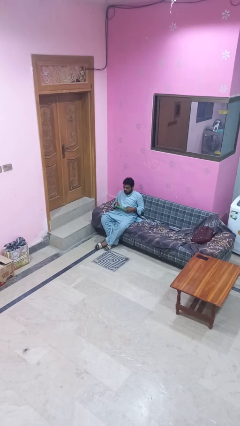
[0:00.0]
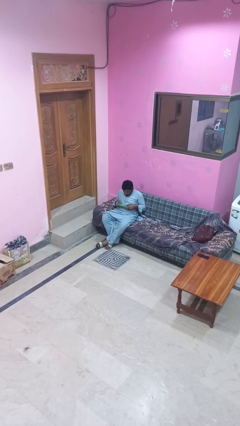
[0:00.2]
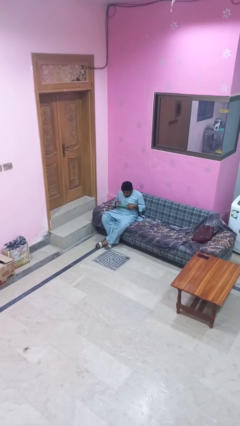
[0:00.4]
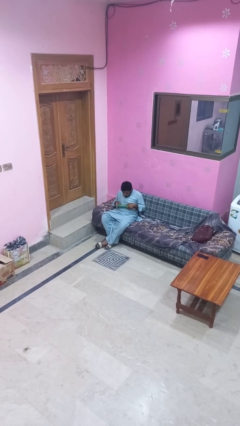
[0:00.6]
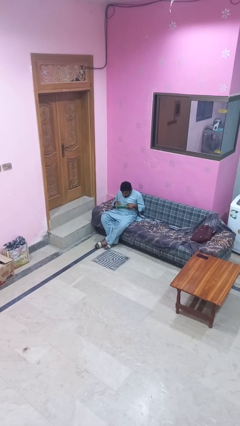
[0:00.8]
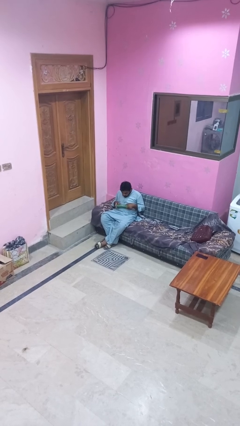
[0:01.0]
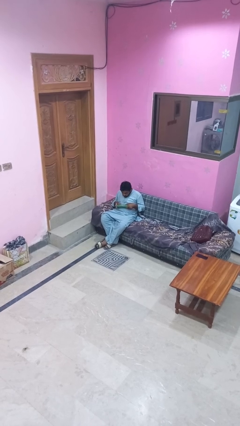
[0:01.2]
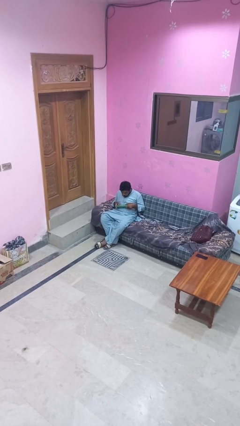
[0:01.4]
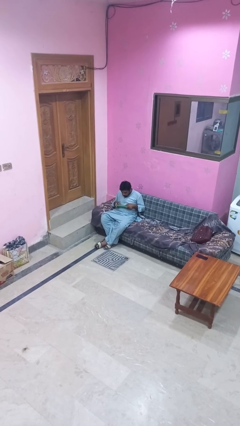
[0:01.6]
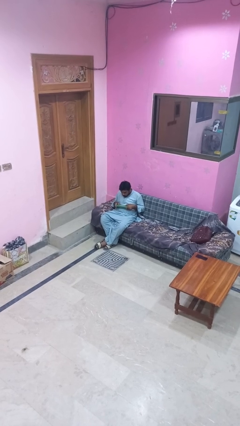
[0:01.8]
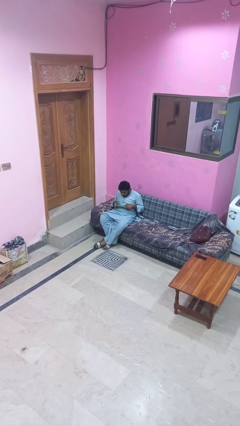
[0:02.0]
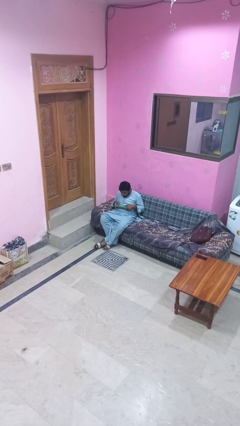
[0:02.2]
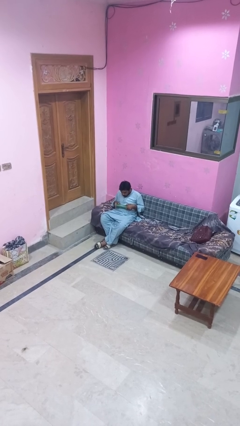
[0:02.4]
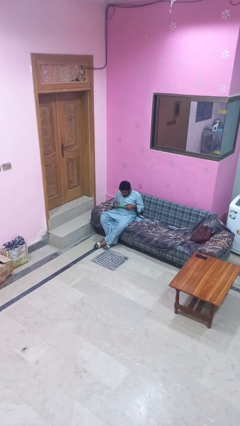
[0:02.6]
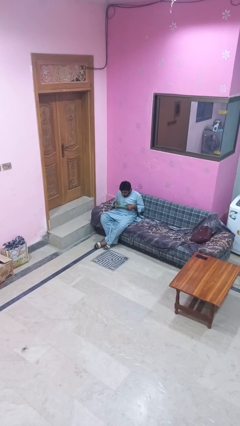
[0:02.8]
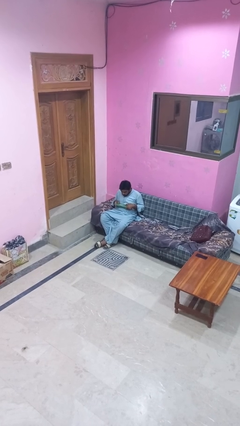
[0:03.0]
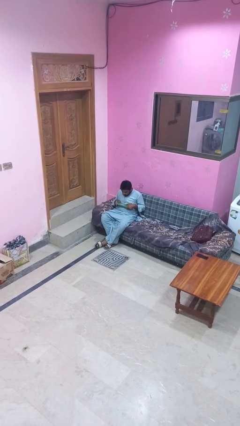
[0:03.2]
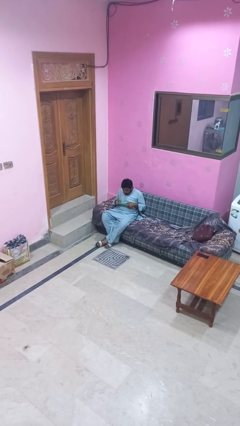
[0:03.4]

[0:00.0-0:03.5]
person interacts with handheld game

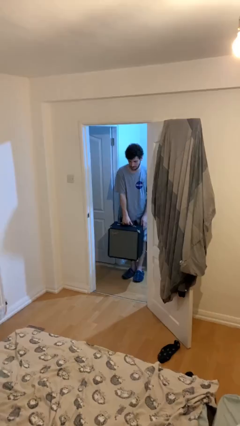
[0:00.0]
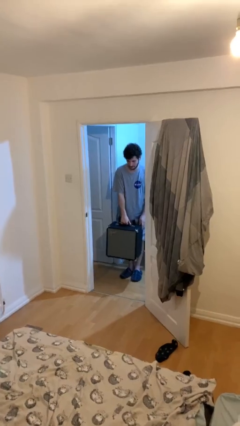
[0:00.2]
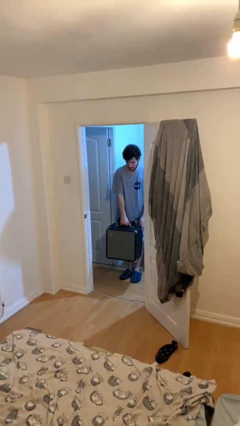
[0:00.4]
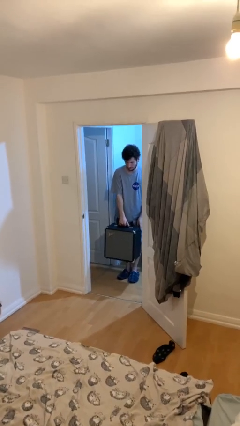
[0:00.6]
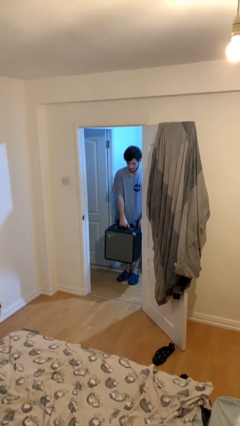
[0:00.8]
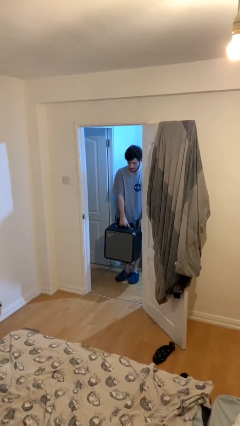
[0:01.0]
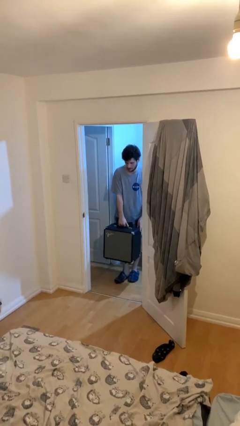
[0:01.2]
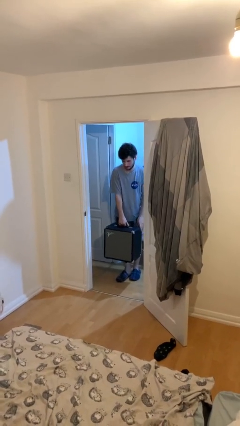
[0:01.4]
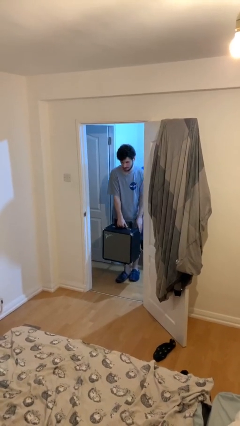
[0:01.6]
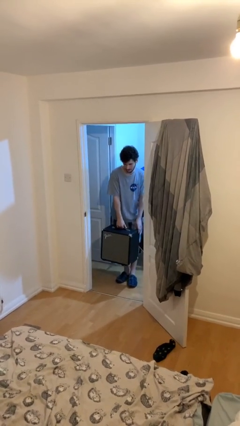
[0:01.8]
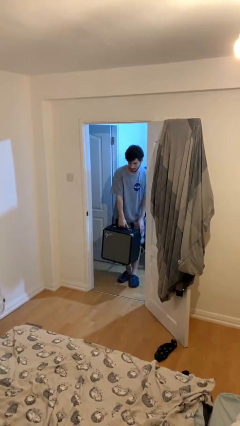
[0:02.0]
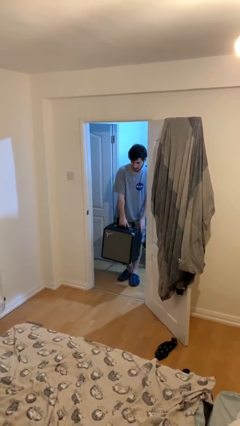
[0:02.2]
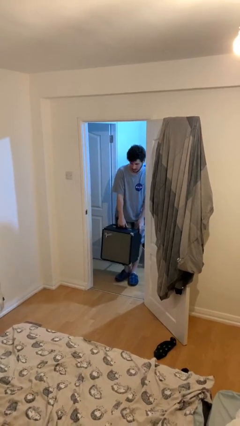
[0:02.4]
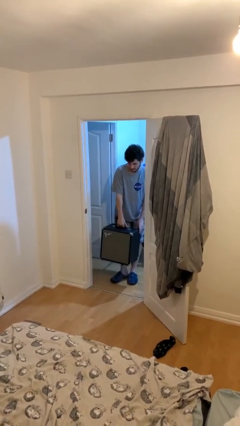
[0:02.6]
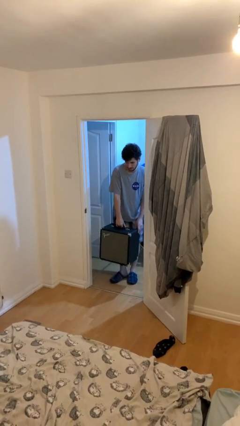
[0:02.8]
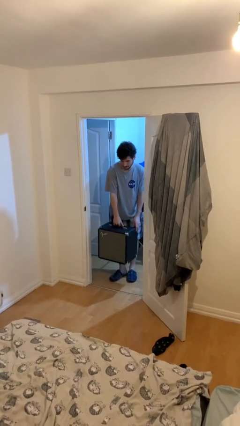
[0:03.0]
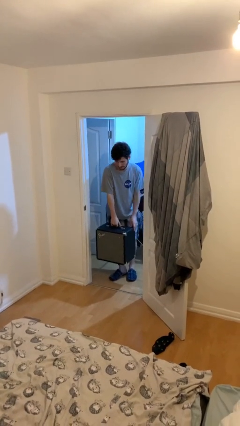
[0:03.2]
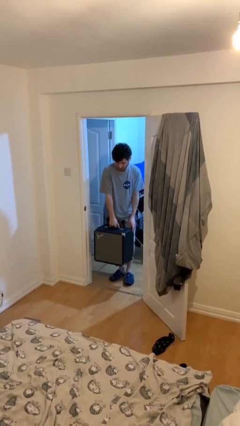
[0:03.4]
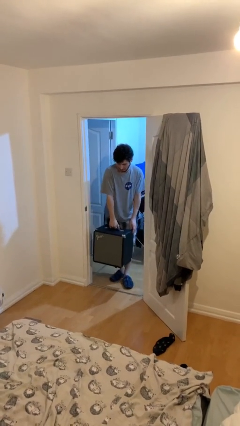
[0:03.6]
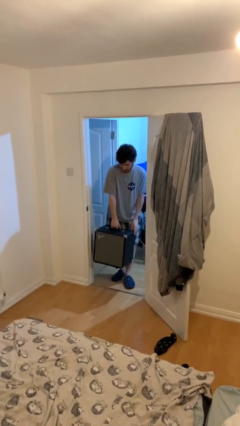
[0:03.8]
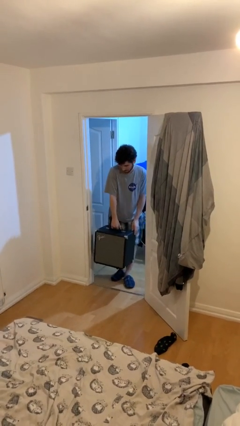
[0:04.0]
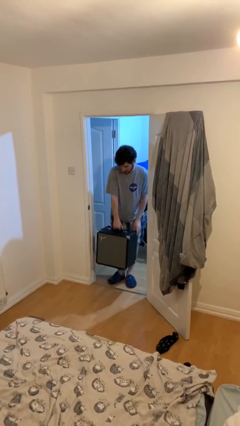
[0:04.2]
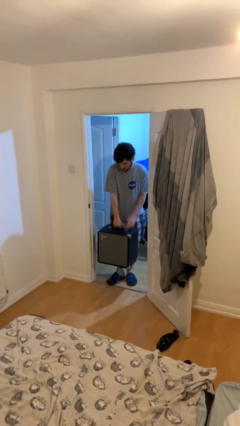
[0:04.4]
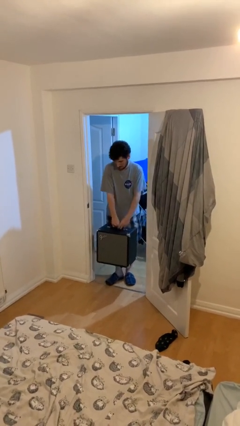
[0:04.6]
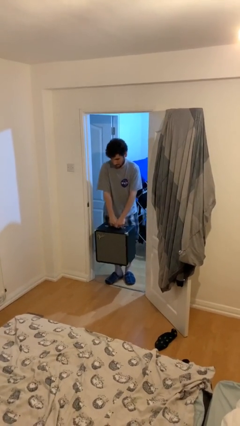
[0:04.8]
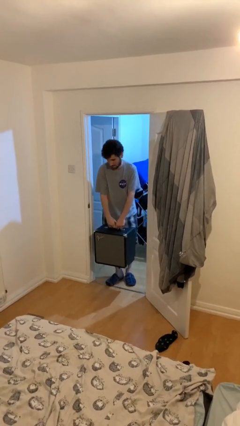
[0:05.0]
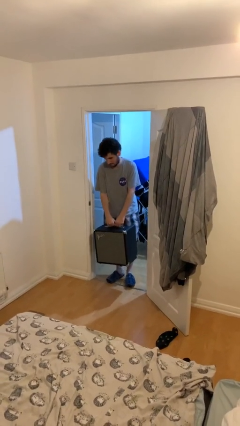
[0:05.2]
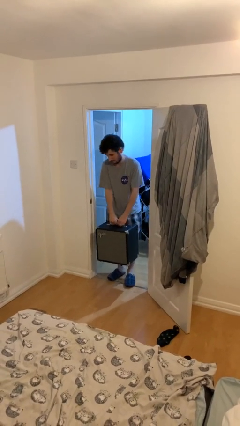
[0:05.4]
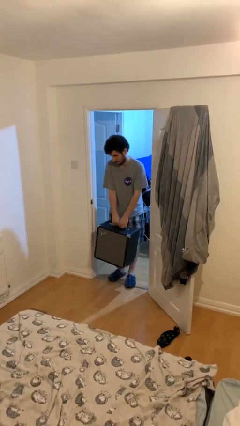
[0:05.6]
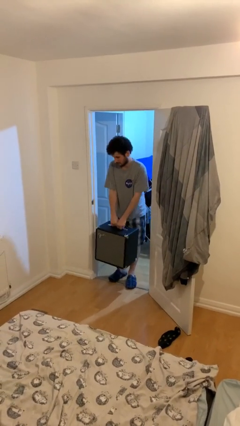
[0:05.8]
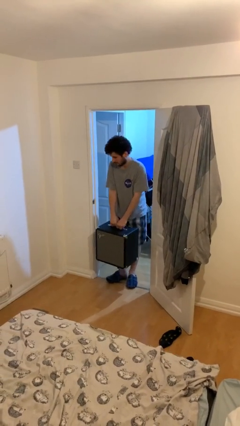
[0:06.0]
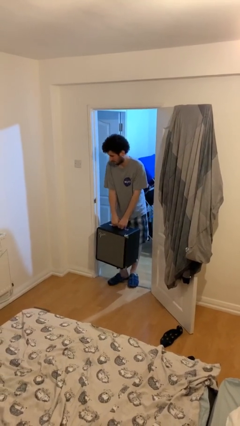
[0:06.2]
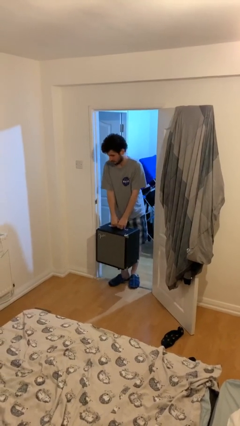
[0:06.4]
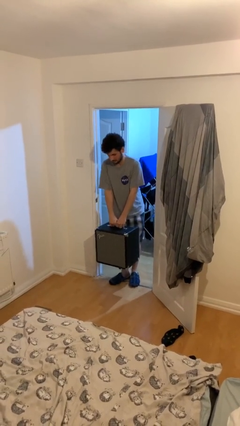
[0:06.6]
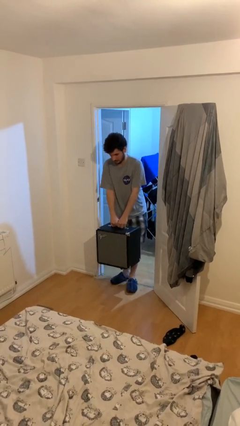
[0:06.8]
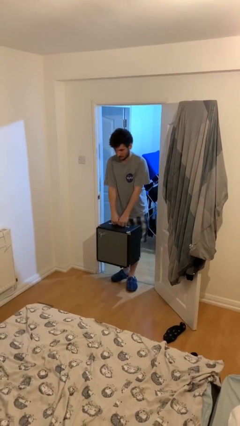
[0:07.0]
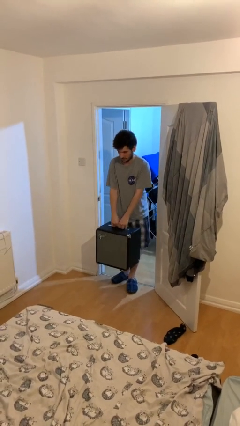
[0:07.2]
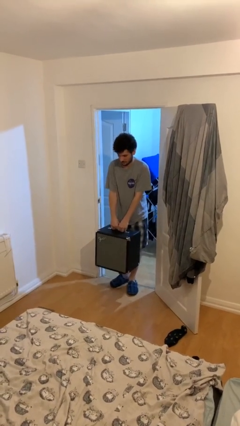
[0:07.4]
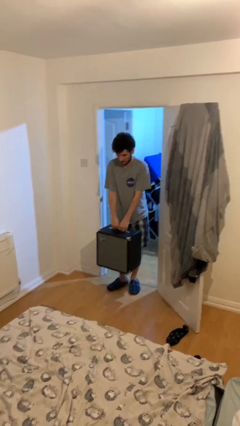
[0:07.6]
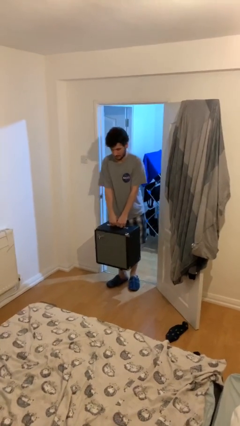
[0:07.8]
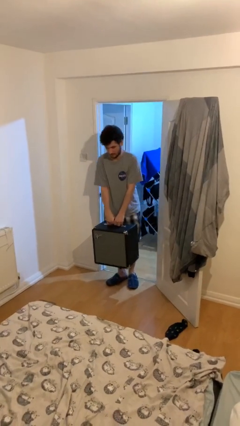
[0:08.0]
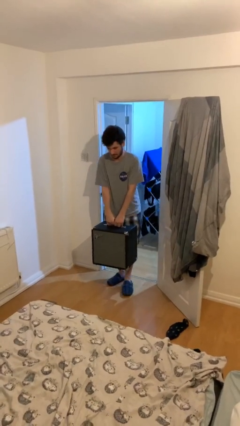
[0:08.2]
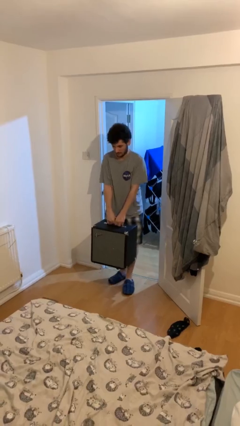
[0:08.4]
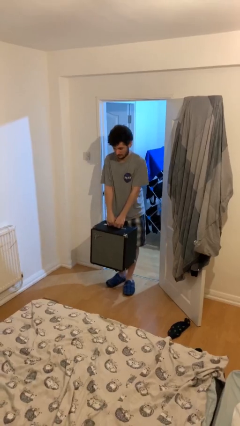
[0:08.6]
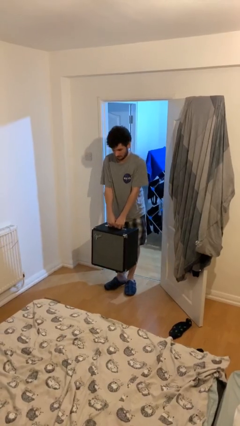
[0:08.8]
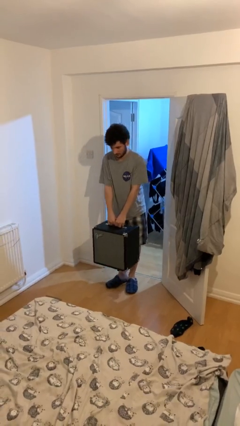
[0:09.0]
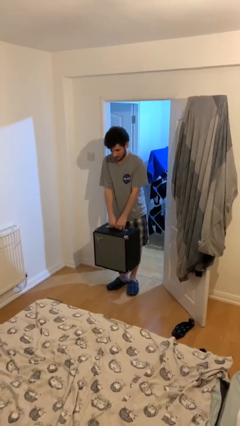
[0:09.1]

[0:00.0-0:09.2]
person carries heavy object

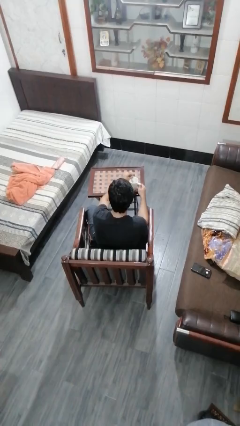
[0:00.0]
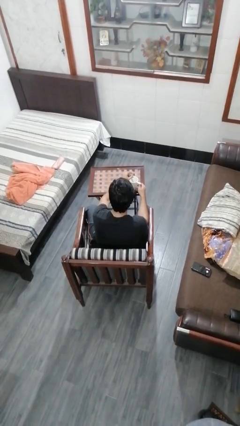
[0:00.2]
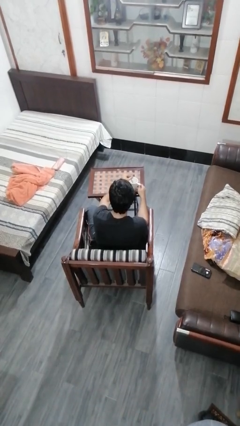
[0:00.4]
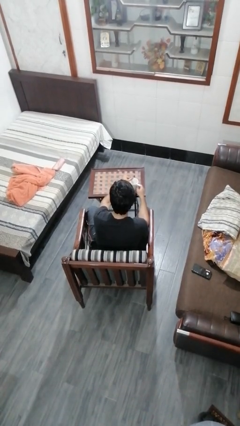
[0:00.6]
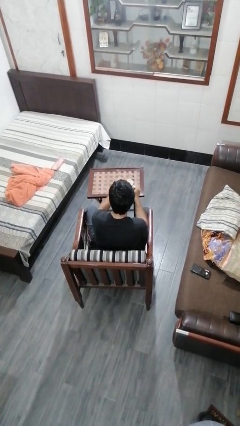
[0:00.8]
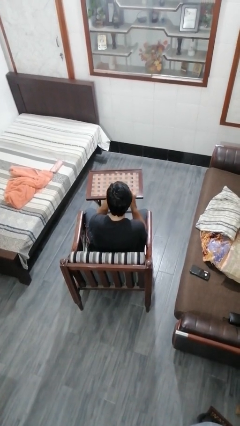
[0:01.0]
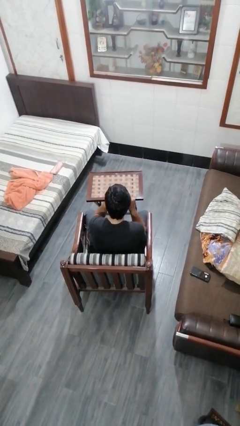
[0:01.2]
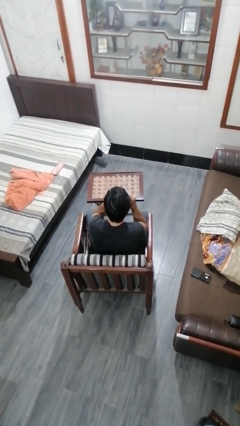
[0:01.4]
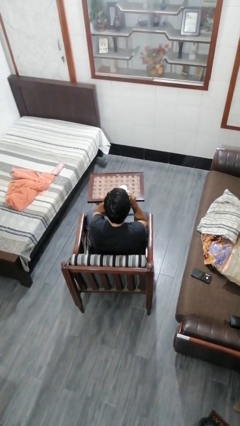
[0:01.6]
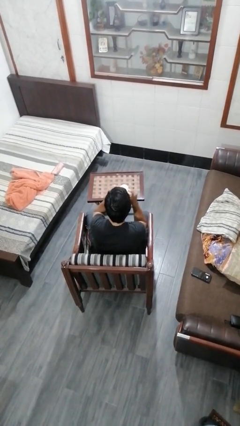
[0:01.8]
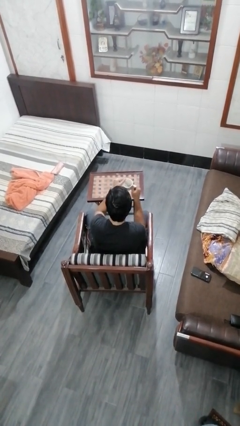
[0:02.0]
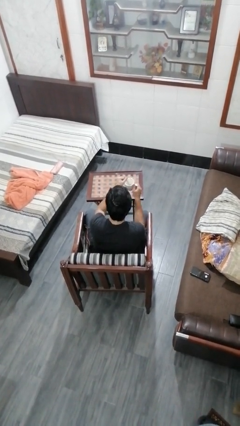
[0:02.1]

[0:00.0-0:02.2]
person drinks from mug

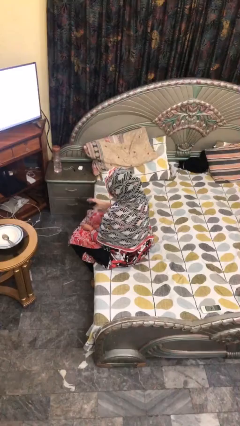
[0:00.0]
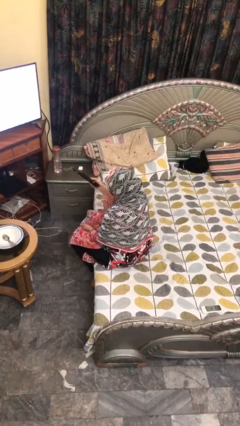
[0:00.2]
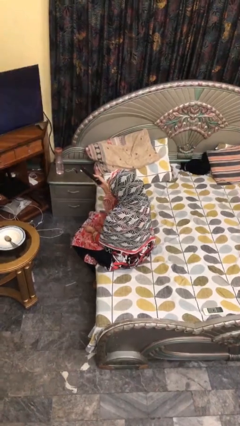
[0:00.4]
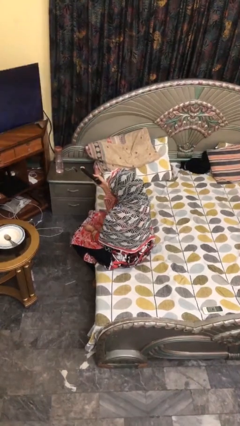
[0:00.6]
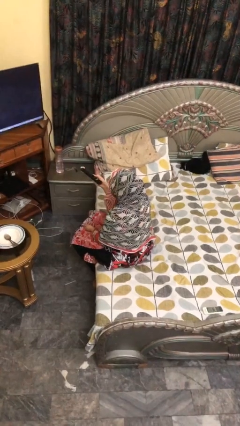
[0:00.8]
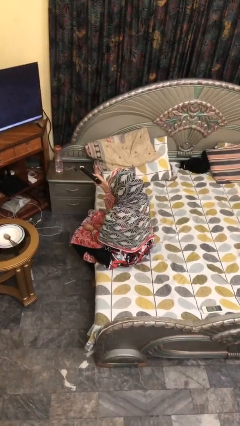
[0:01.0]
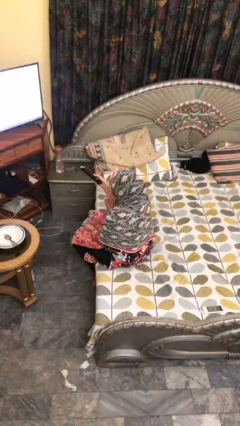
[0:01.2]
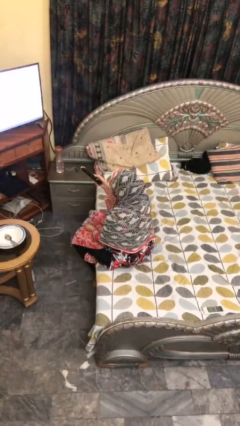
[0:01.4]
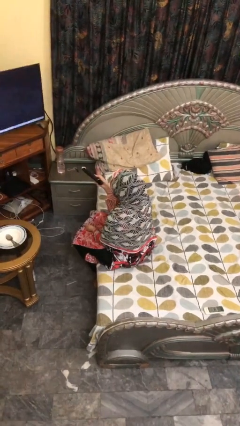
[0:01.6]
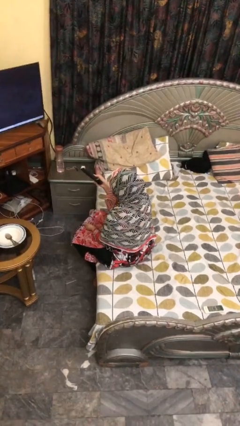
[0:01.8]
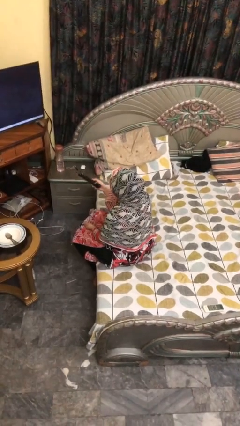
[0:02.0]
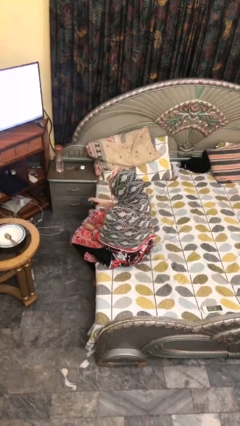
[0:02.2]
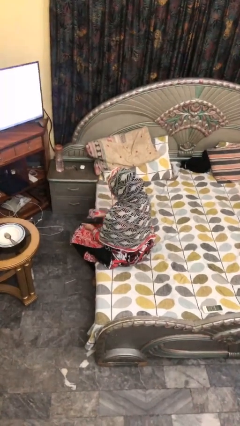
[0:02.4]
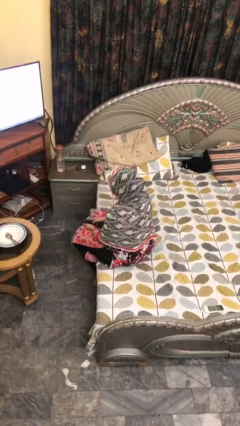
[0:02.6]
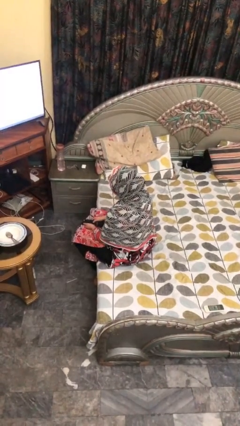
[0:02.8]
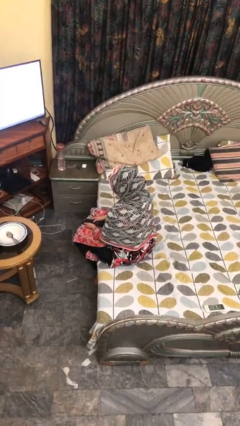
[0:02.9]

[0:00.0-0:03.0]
person uses television remote

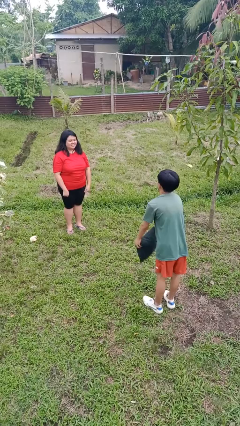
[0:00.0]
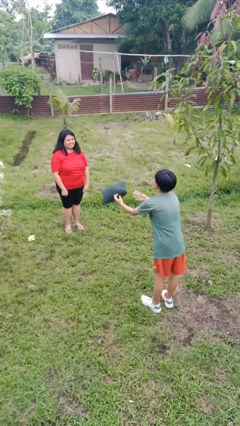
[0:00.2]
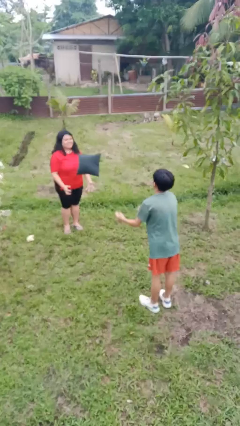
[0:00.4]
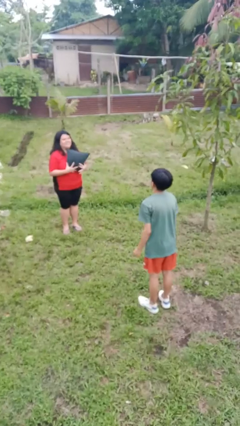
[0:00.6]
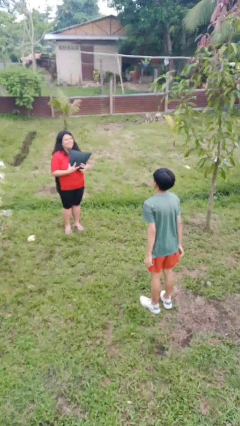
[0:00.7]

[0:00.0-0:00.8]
person catches object from person
